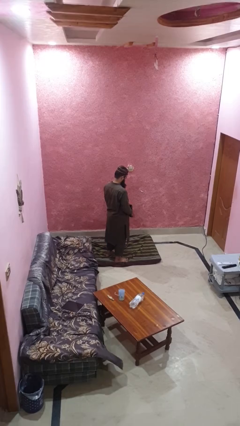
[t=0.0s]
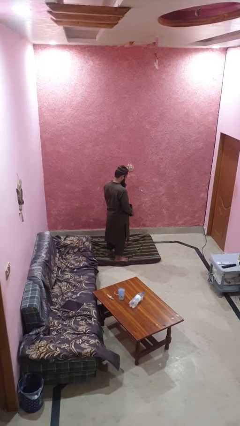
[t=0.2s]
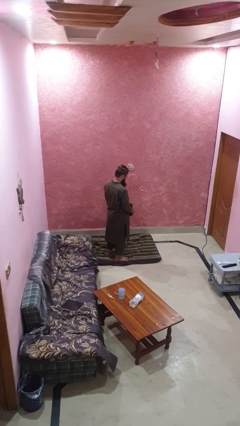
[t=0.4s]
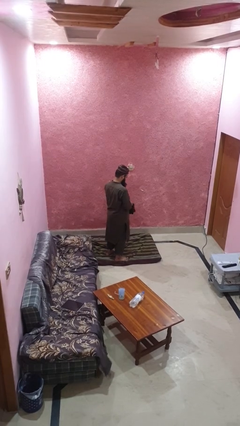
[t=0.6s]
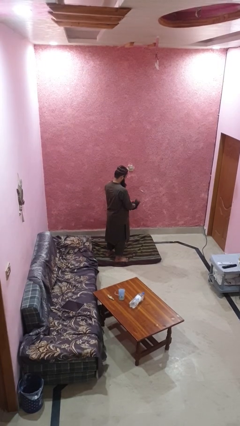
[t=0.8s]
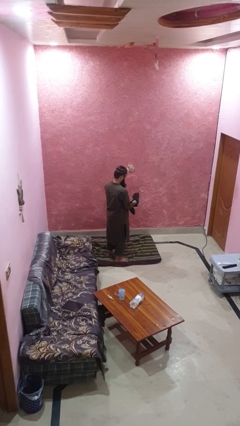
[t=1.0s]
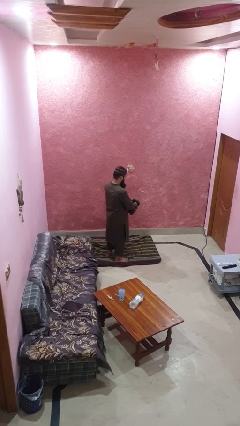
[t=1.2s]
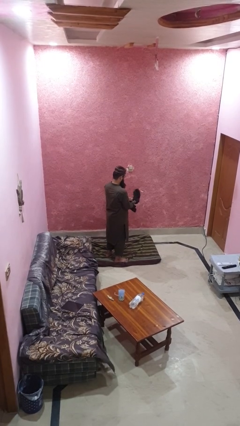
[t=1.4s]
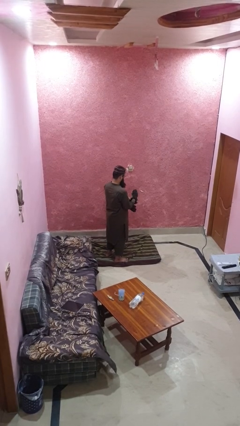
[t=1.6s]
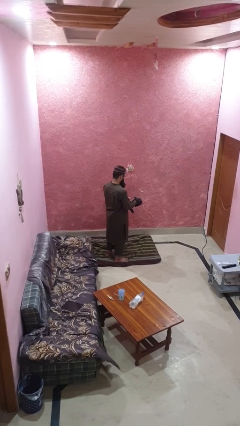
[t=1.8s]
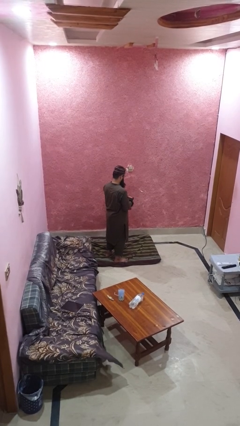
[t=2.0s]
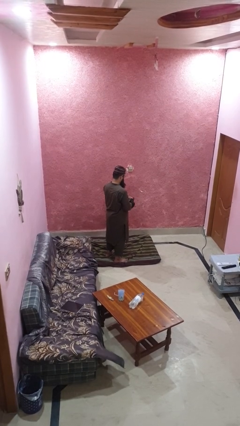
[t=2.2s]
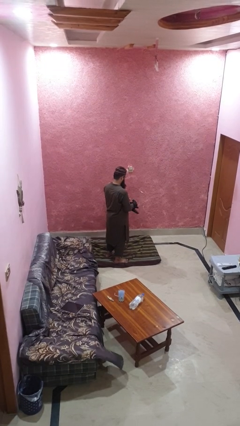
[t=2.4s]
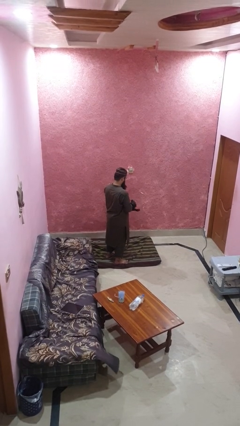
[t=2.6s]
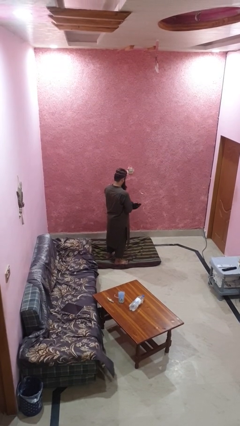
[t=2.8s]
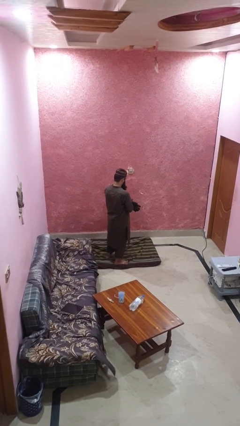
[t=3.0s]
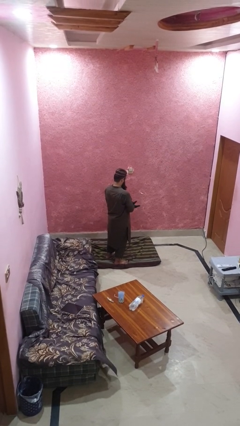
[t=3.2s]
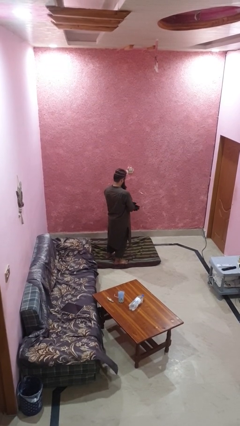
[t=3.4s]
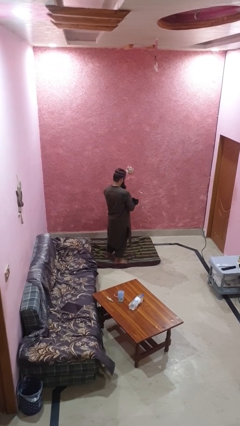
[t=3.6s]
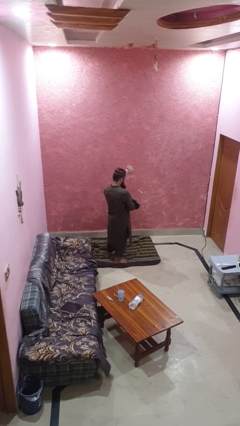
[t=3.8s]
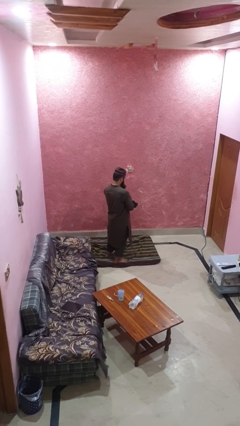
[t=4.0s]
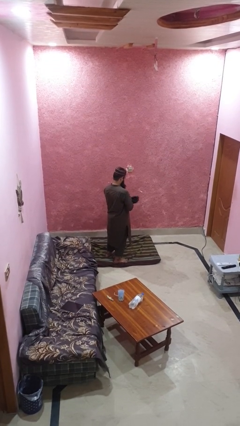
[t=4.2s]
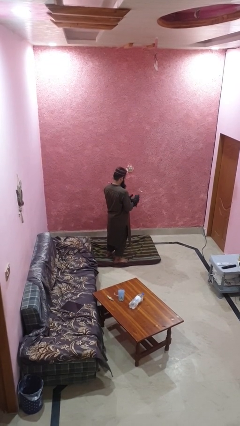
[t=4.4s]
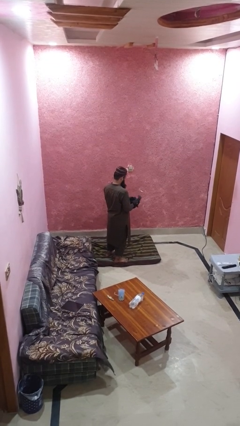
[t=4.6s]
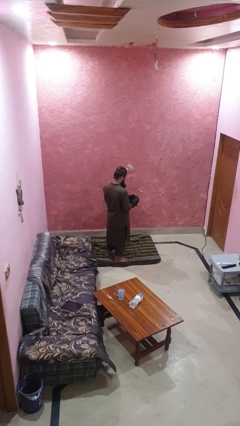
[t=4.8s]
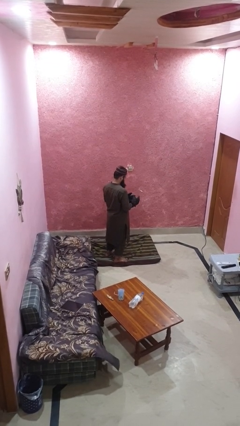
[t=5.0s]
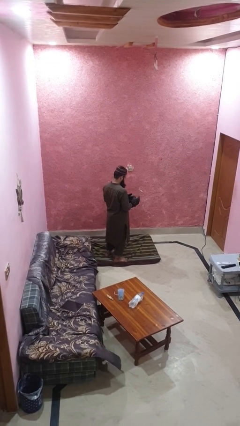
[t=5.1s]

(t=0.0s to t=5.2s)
person puts on gloves

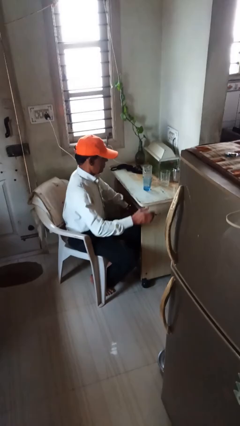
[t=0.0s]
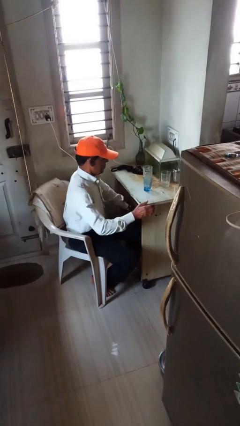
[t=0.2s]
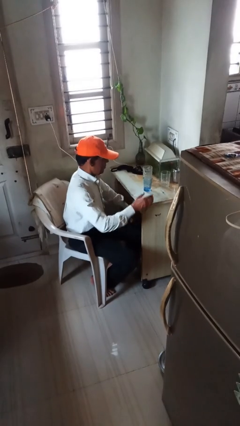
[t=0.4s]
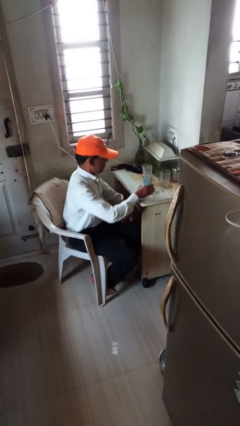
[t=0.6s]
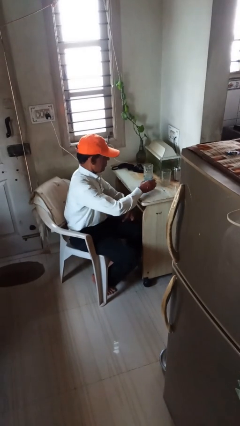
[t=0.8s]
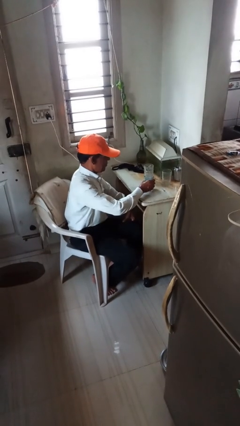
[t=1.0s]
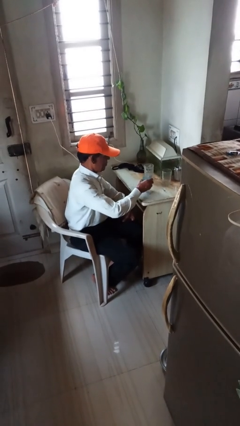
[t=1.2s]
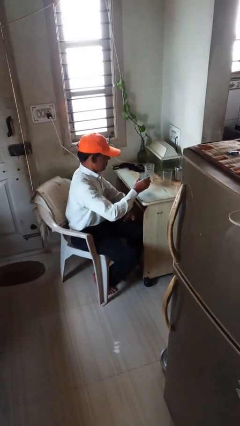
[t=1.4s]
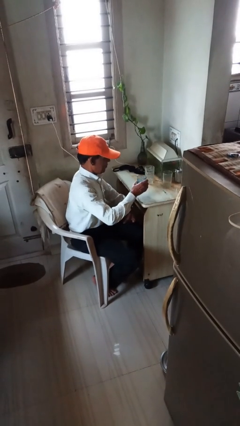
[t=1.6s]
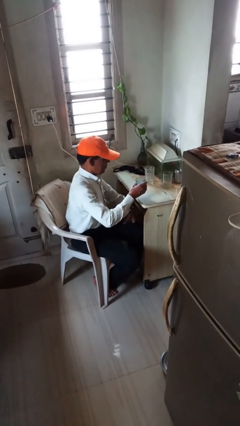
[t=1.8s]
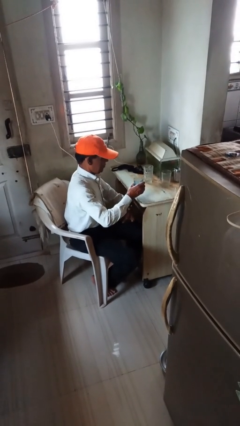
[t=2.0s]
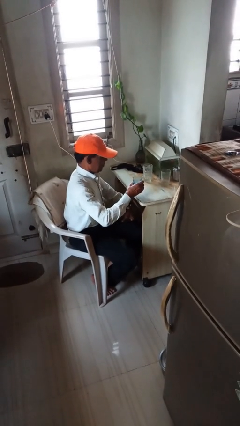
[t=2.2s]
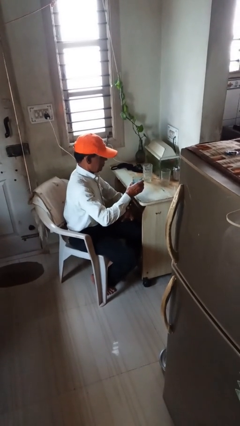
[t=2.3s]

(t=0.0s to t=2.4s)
person picks up object from table

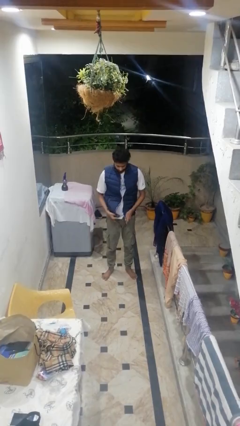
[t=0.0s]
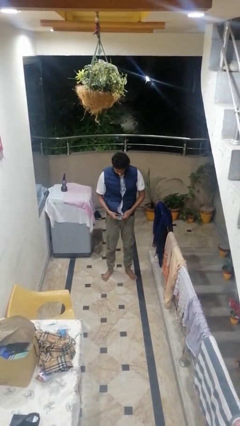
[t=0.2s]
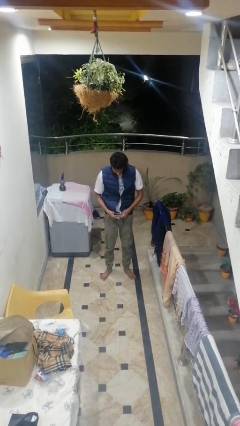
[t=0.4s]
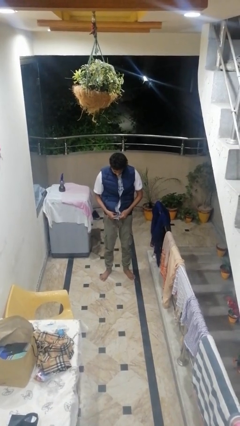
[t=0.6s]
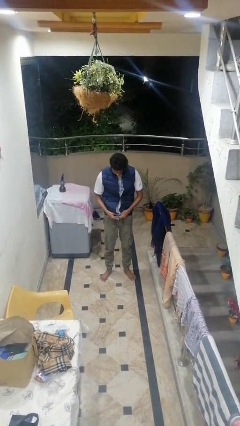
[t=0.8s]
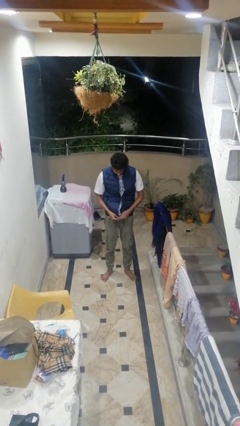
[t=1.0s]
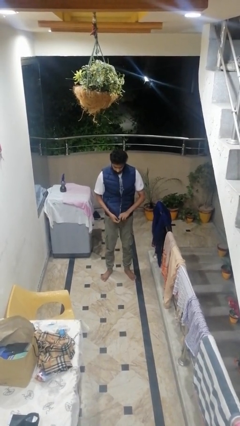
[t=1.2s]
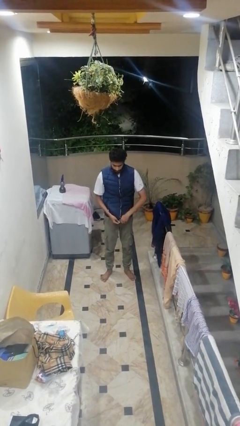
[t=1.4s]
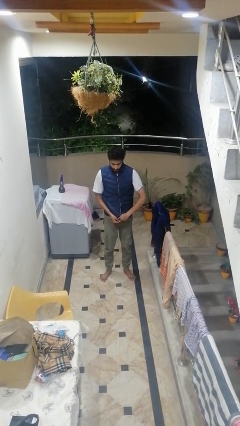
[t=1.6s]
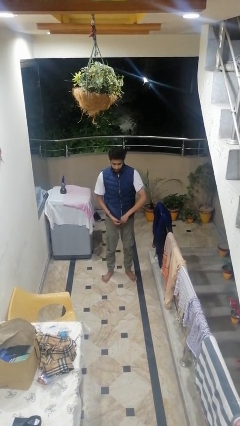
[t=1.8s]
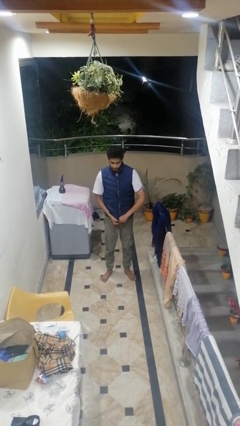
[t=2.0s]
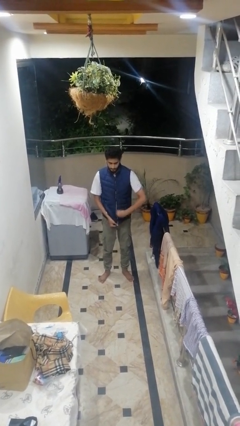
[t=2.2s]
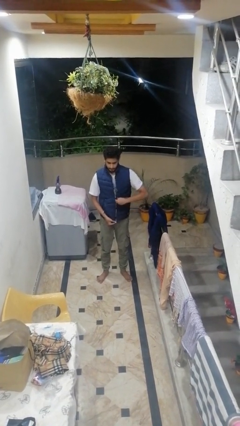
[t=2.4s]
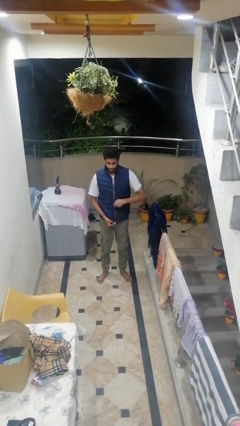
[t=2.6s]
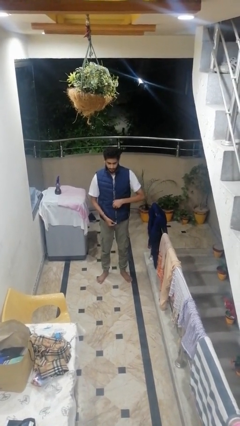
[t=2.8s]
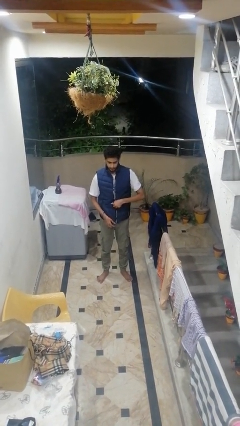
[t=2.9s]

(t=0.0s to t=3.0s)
person zips up jacket

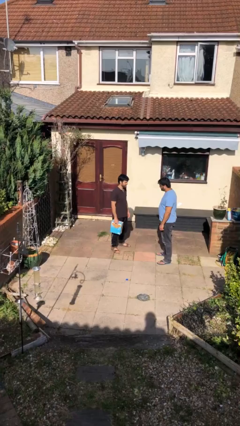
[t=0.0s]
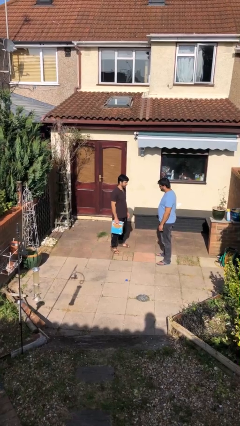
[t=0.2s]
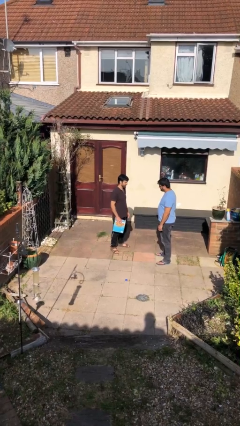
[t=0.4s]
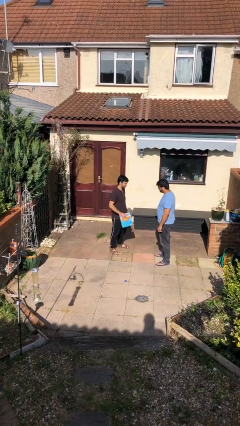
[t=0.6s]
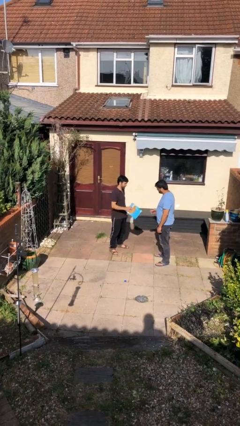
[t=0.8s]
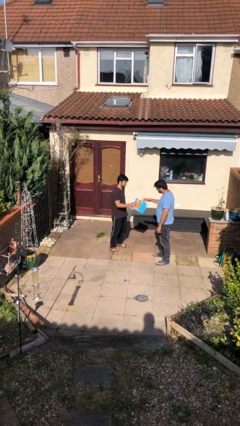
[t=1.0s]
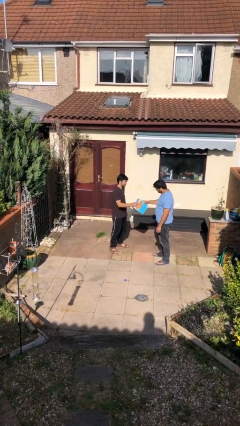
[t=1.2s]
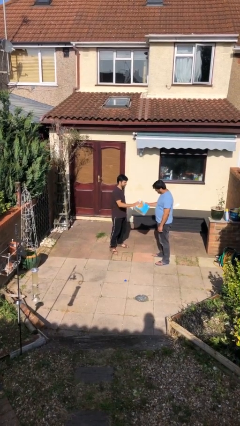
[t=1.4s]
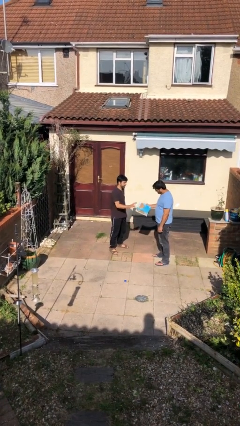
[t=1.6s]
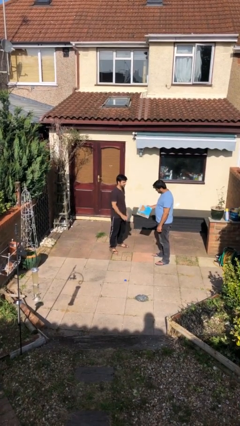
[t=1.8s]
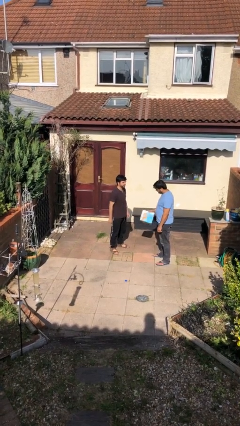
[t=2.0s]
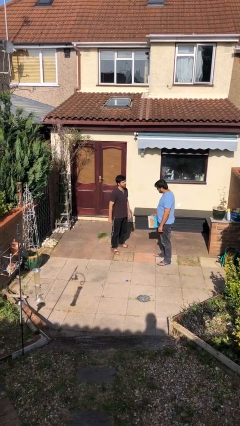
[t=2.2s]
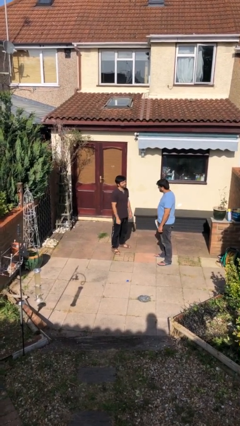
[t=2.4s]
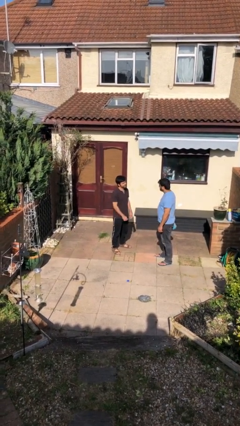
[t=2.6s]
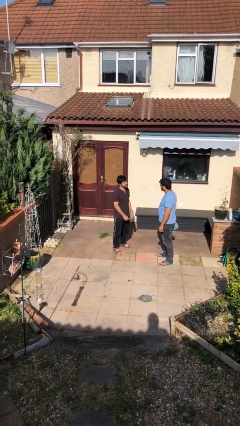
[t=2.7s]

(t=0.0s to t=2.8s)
person transfers object to person

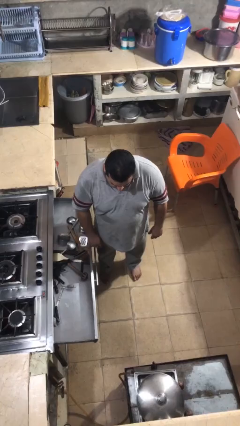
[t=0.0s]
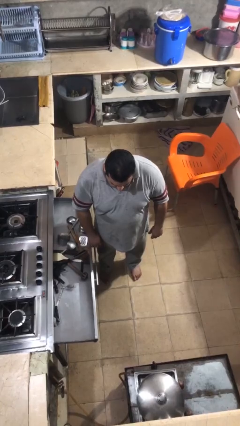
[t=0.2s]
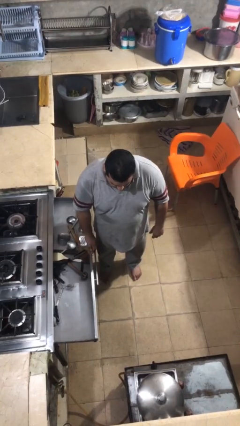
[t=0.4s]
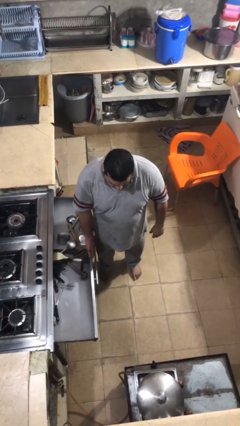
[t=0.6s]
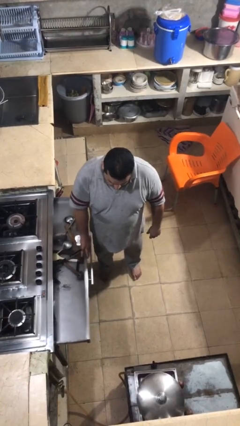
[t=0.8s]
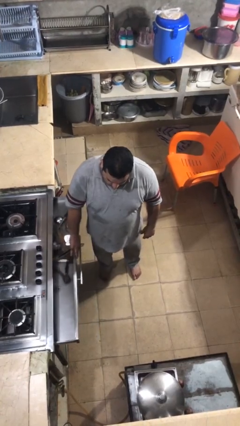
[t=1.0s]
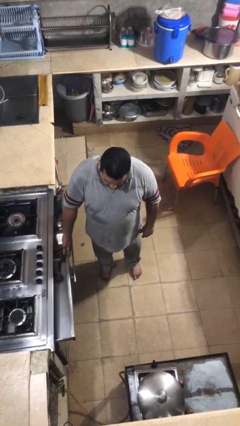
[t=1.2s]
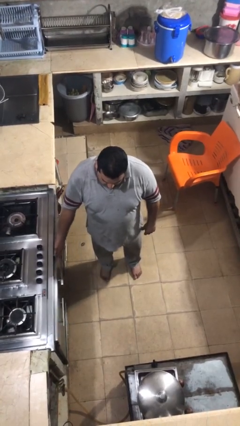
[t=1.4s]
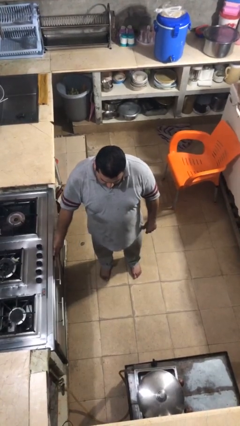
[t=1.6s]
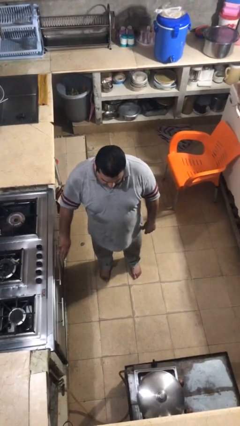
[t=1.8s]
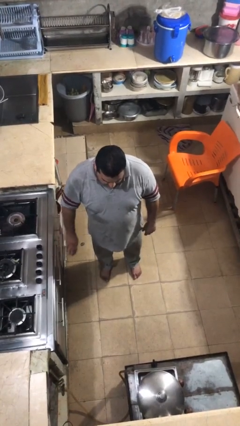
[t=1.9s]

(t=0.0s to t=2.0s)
person closes kitchen drawer

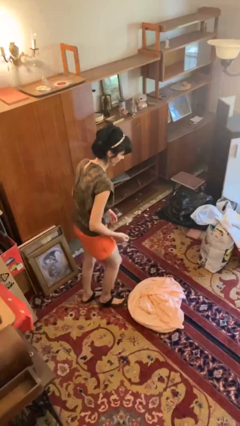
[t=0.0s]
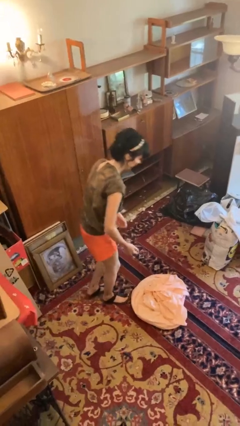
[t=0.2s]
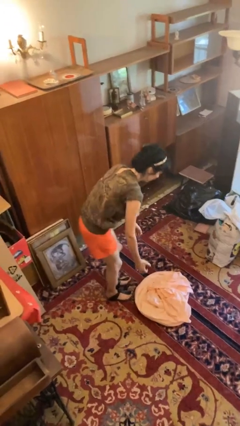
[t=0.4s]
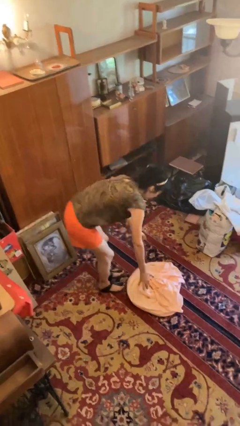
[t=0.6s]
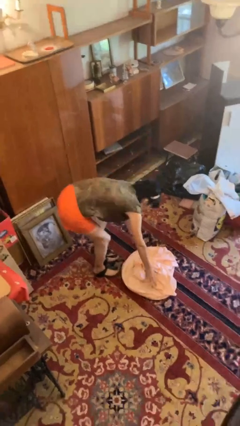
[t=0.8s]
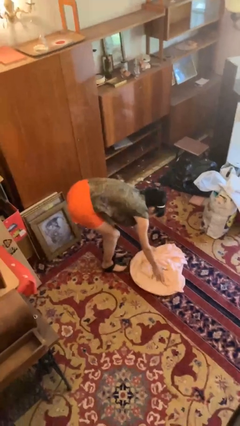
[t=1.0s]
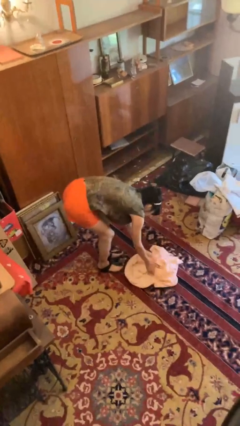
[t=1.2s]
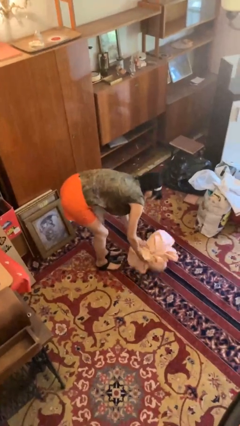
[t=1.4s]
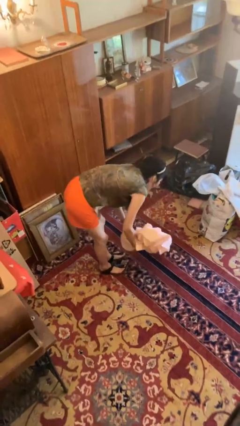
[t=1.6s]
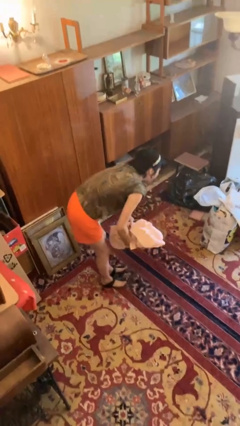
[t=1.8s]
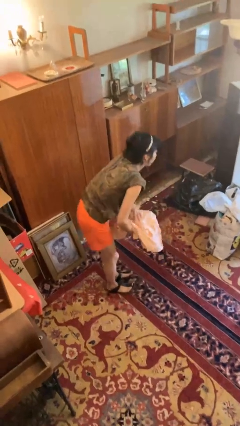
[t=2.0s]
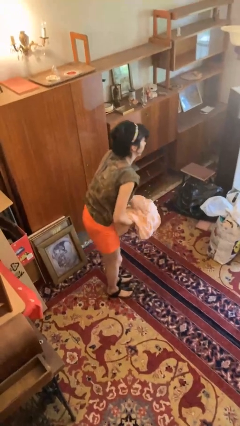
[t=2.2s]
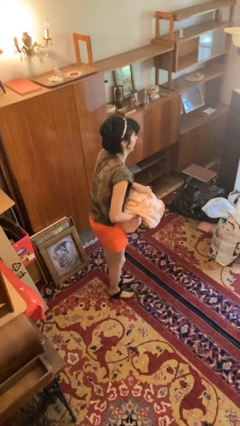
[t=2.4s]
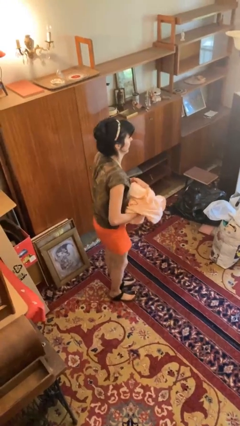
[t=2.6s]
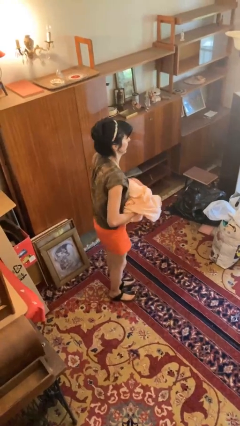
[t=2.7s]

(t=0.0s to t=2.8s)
person picks up object from floor
